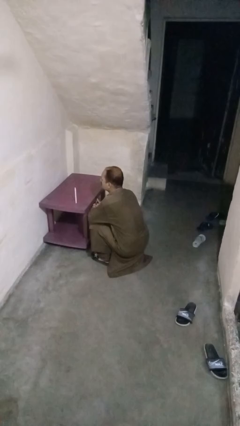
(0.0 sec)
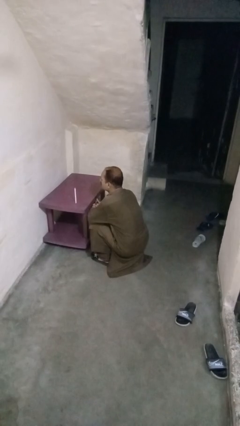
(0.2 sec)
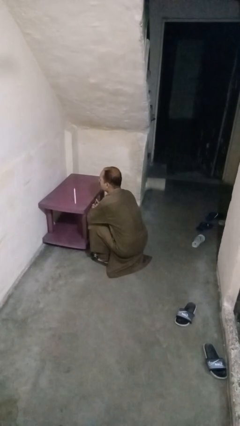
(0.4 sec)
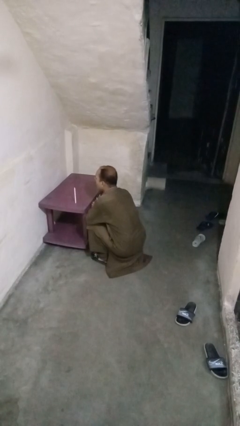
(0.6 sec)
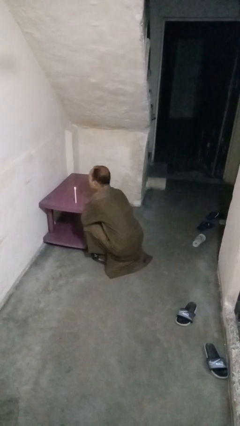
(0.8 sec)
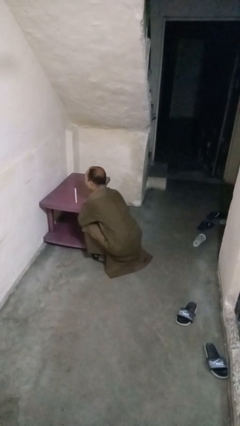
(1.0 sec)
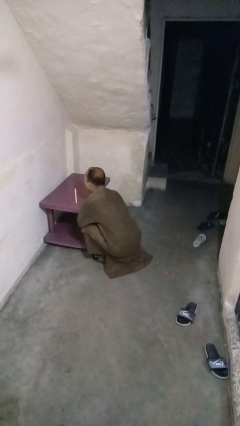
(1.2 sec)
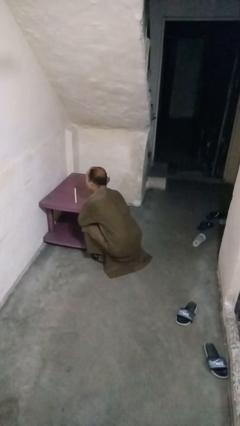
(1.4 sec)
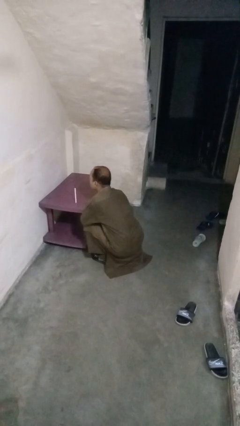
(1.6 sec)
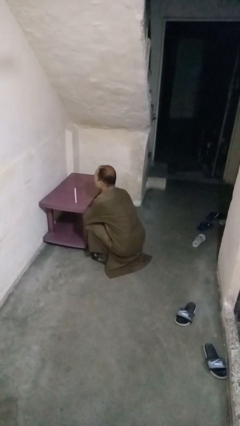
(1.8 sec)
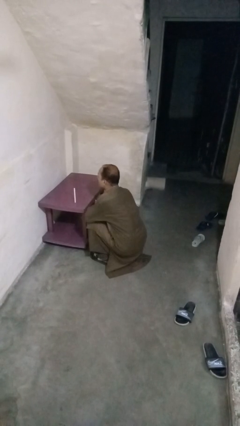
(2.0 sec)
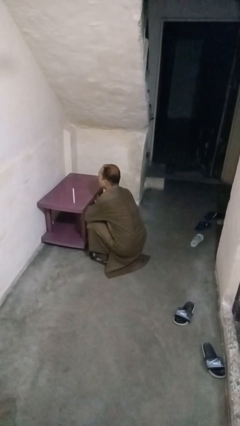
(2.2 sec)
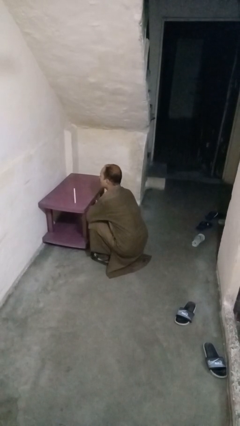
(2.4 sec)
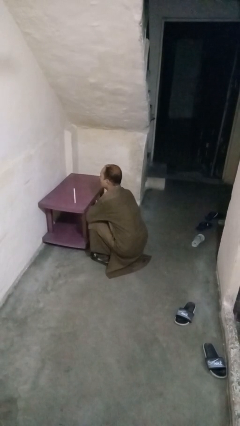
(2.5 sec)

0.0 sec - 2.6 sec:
person extinguishes candle

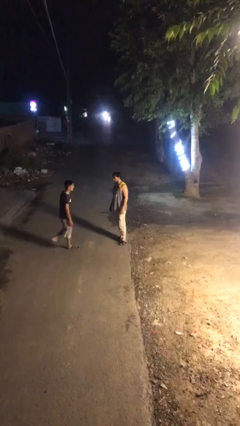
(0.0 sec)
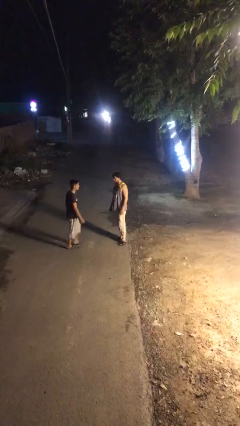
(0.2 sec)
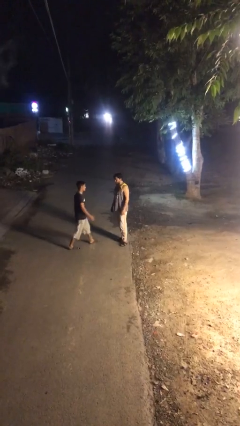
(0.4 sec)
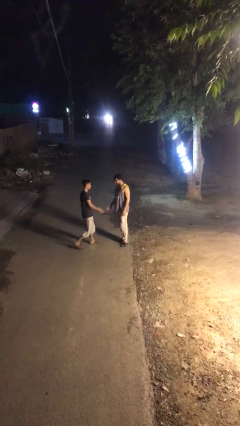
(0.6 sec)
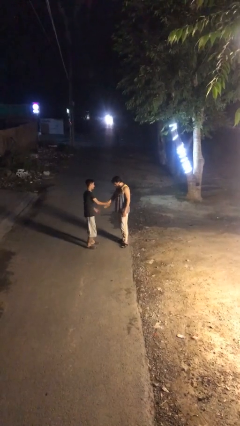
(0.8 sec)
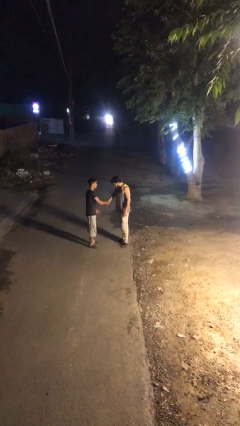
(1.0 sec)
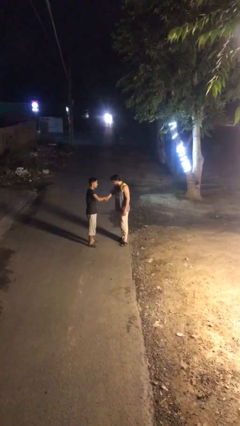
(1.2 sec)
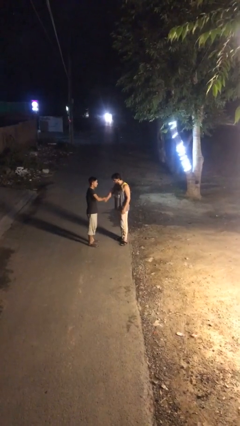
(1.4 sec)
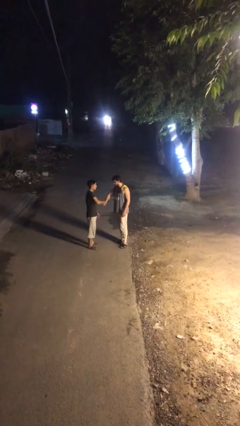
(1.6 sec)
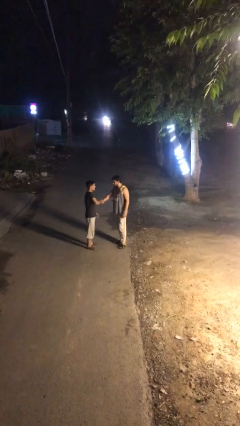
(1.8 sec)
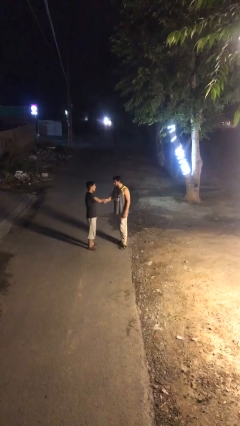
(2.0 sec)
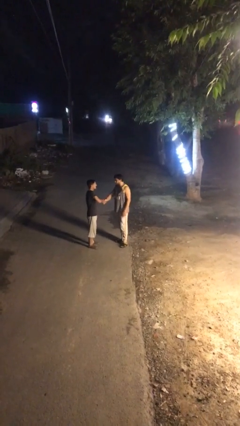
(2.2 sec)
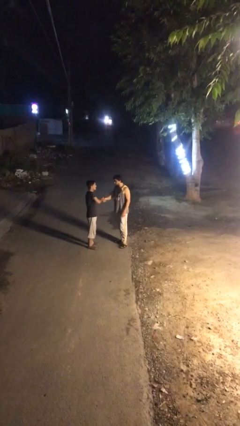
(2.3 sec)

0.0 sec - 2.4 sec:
person shakes hand

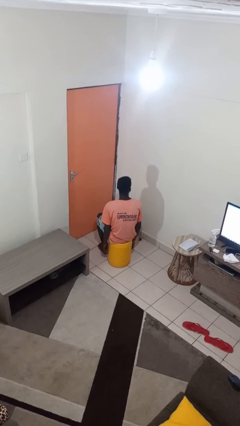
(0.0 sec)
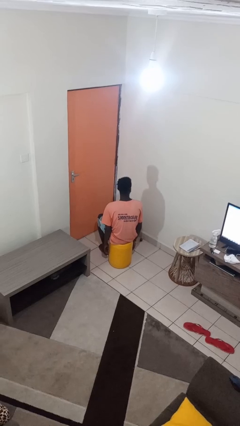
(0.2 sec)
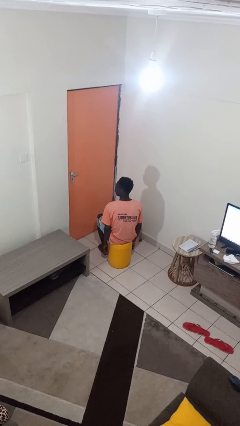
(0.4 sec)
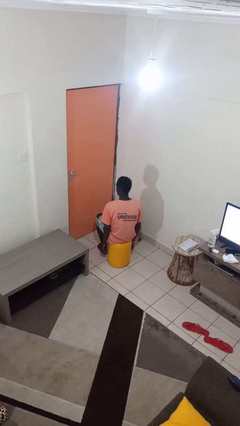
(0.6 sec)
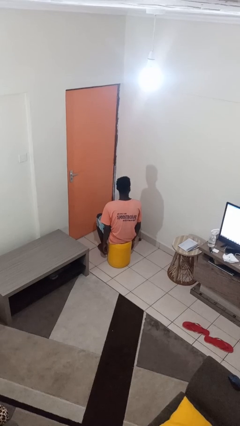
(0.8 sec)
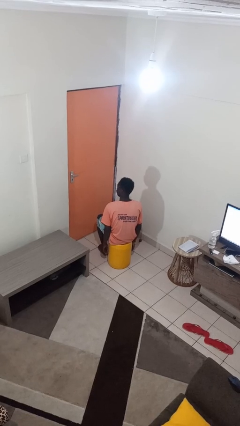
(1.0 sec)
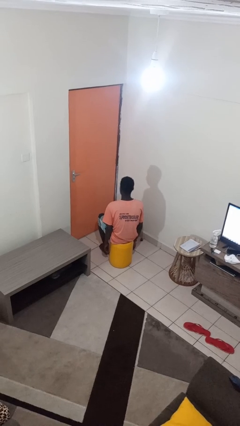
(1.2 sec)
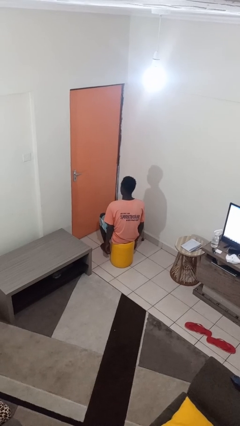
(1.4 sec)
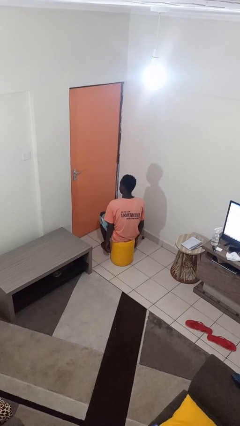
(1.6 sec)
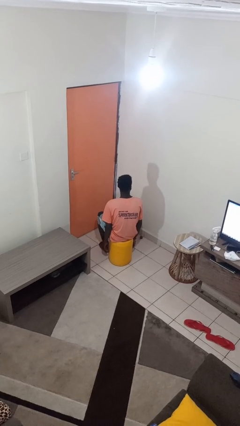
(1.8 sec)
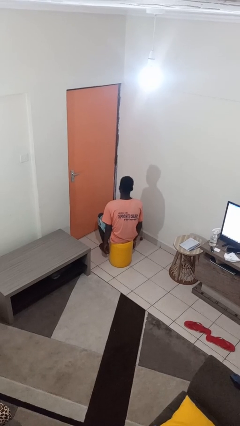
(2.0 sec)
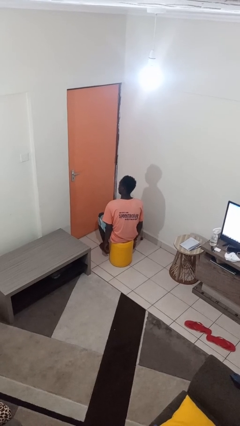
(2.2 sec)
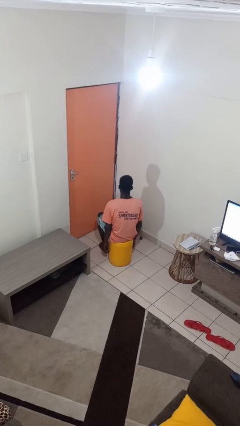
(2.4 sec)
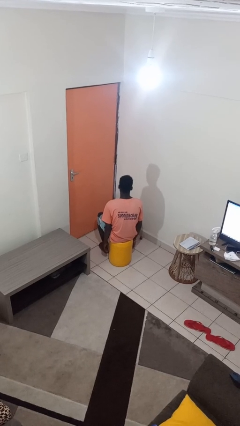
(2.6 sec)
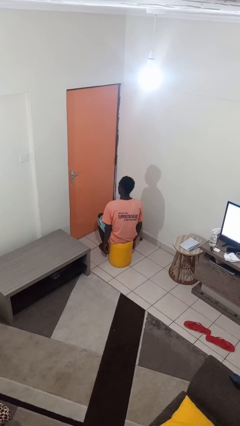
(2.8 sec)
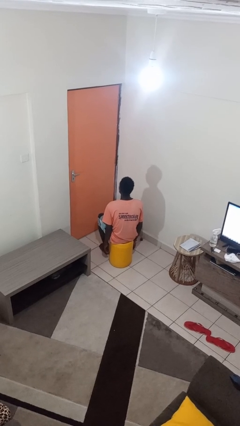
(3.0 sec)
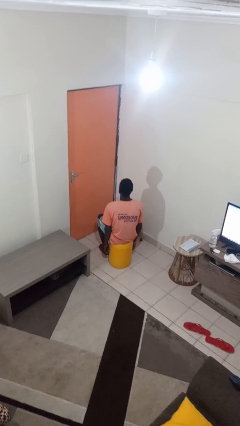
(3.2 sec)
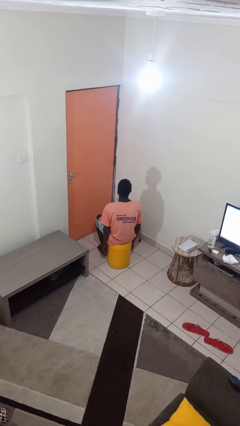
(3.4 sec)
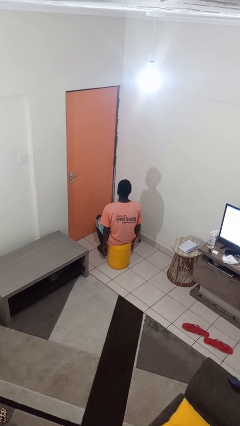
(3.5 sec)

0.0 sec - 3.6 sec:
person shakes head

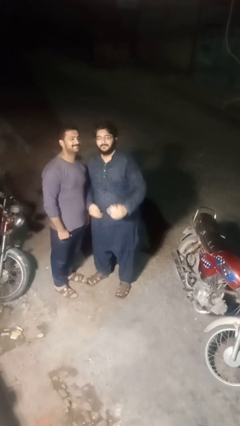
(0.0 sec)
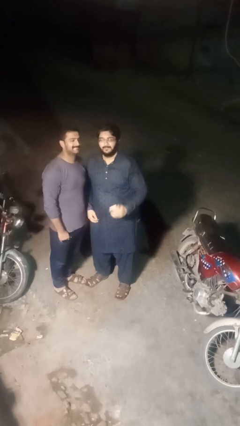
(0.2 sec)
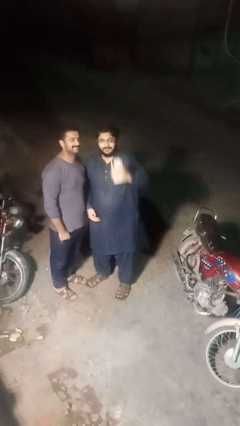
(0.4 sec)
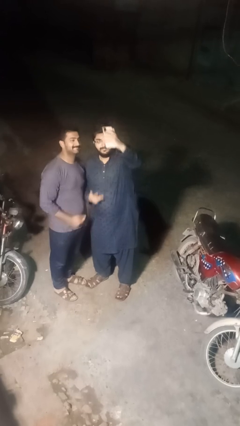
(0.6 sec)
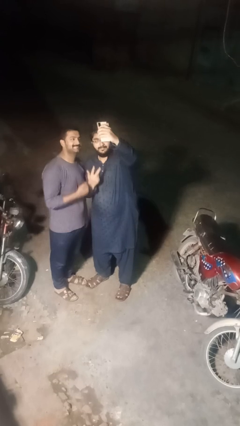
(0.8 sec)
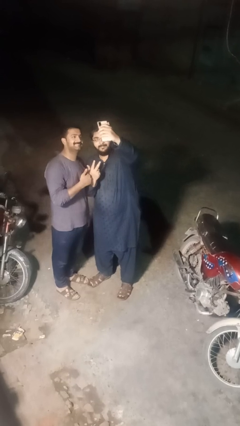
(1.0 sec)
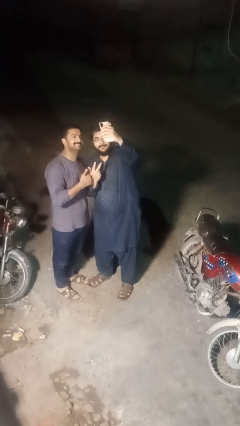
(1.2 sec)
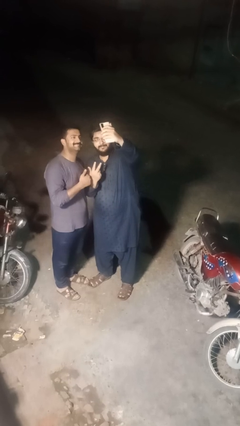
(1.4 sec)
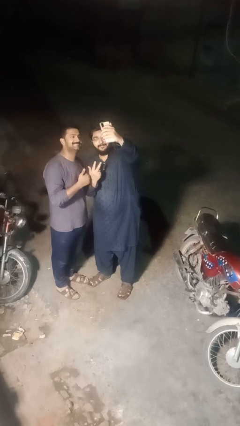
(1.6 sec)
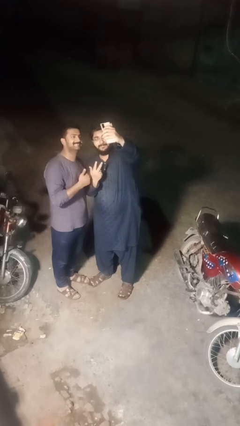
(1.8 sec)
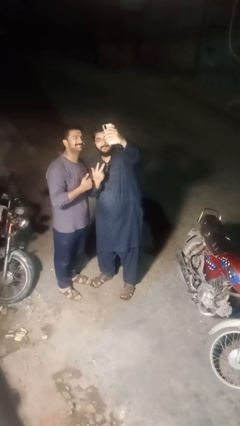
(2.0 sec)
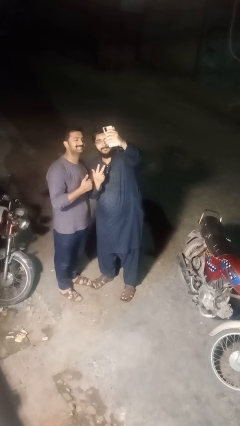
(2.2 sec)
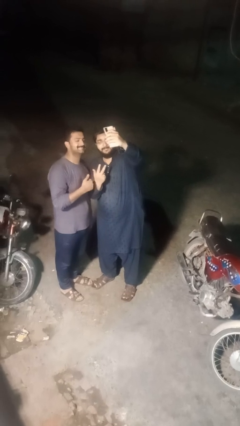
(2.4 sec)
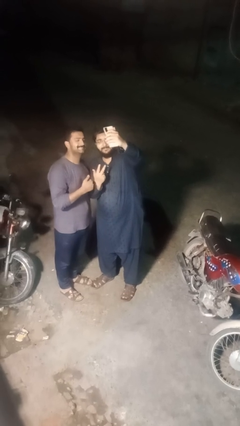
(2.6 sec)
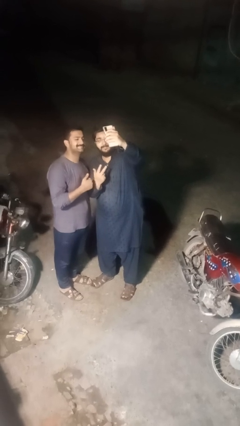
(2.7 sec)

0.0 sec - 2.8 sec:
person takes selfie with person

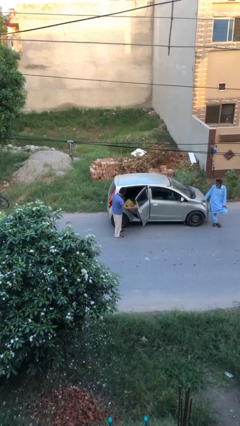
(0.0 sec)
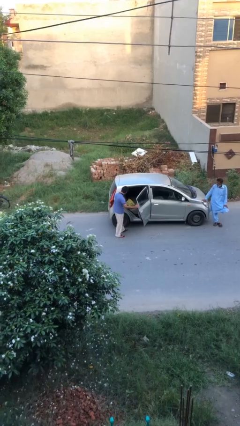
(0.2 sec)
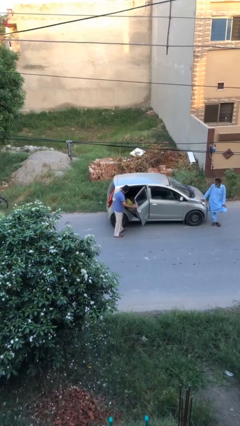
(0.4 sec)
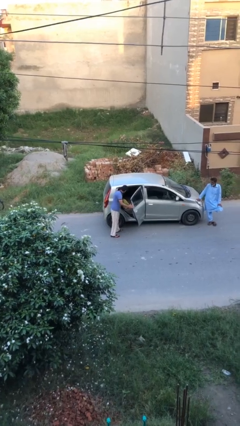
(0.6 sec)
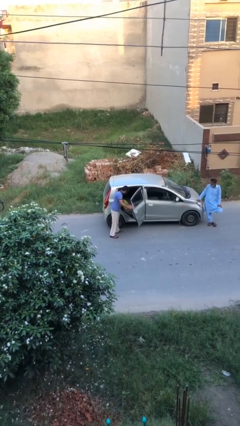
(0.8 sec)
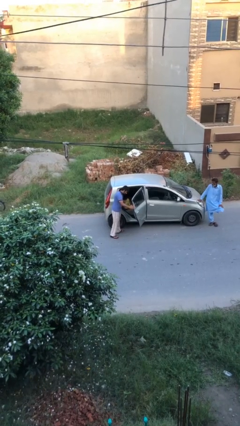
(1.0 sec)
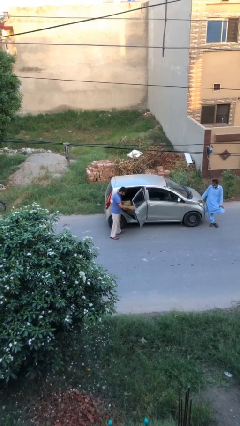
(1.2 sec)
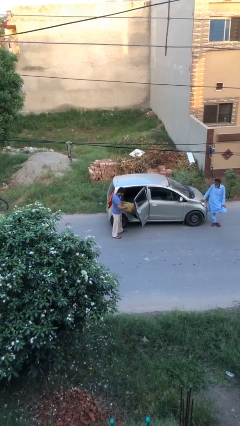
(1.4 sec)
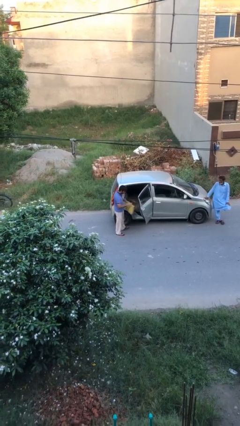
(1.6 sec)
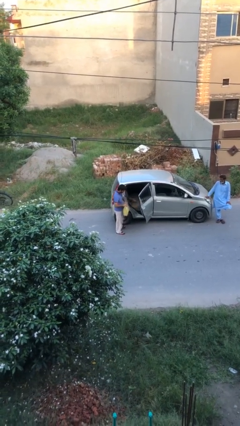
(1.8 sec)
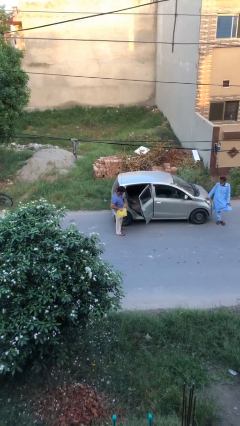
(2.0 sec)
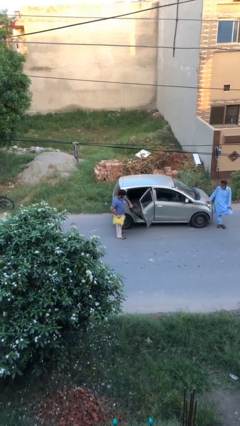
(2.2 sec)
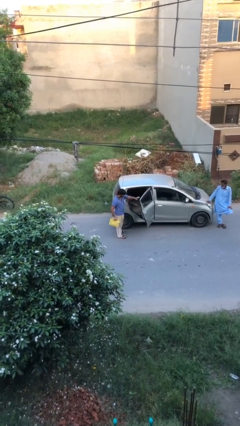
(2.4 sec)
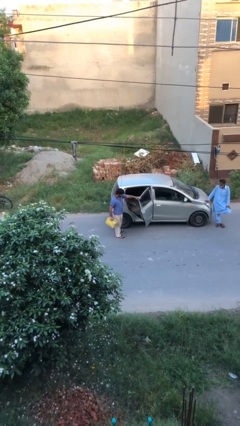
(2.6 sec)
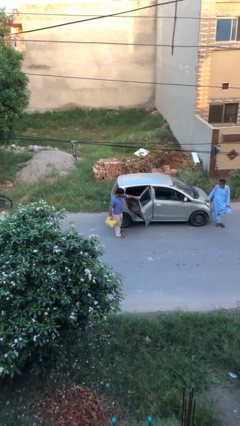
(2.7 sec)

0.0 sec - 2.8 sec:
person unloads car

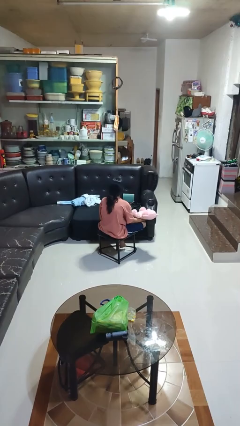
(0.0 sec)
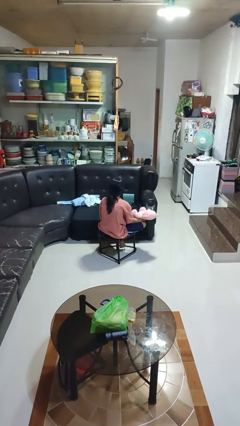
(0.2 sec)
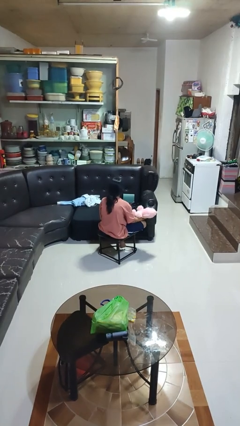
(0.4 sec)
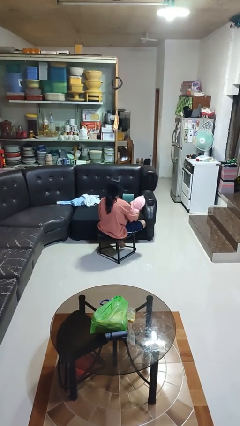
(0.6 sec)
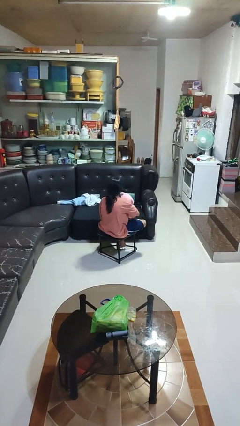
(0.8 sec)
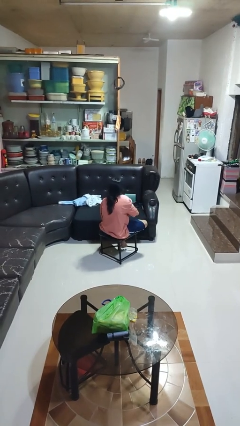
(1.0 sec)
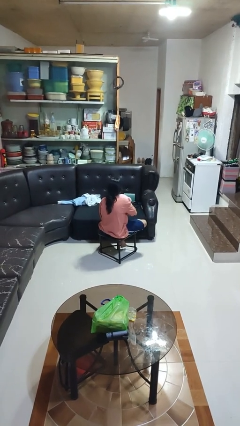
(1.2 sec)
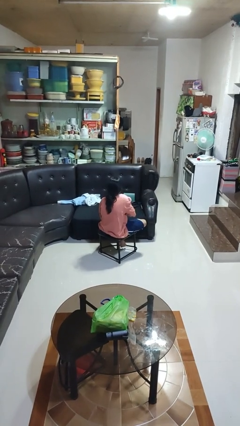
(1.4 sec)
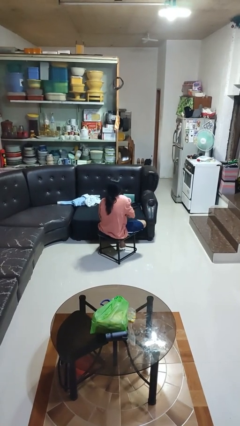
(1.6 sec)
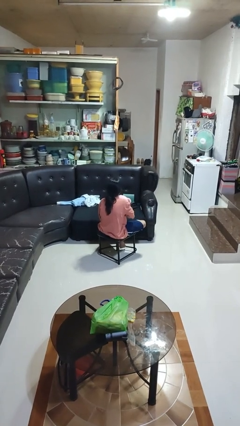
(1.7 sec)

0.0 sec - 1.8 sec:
person hugs stuffed animal

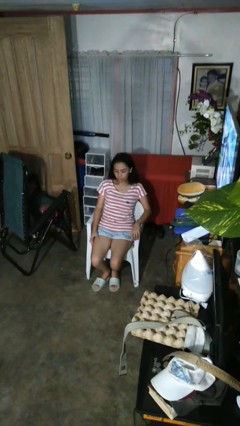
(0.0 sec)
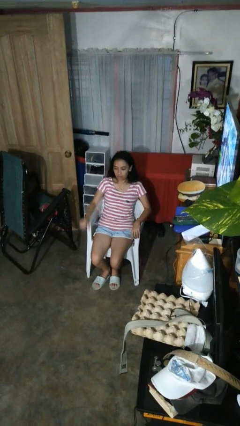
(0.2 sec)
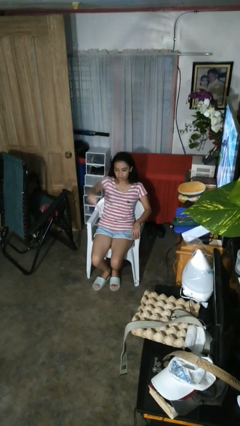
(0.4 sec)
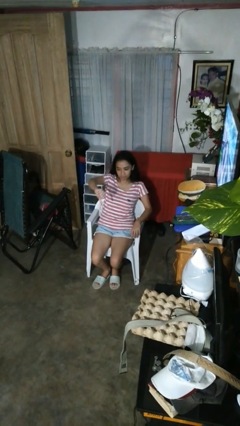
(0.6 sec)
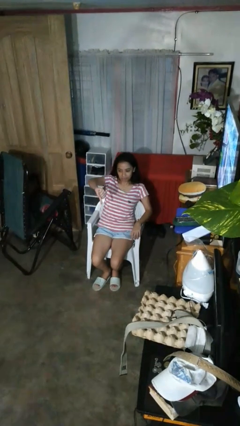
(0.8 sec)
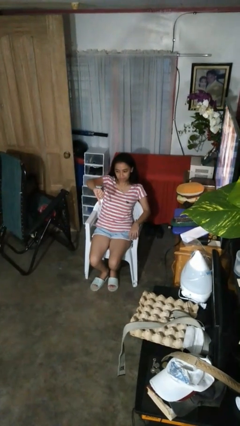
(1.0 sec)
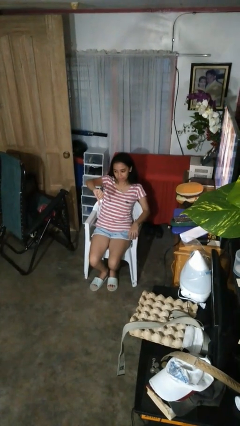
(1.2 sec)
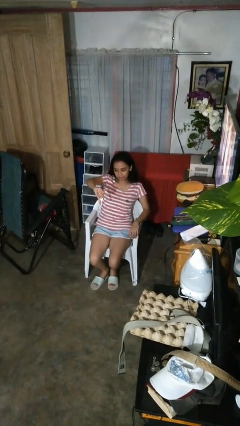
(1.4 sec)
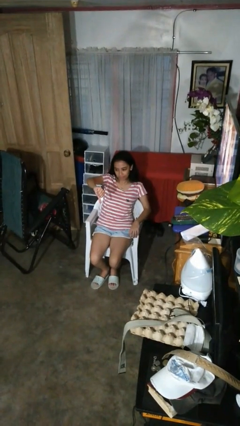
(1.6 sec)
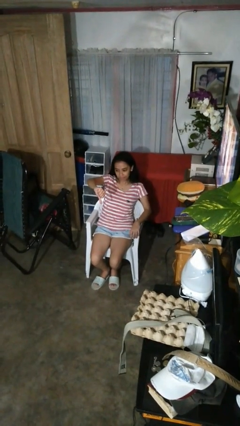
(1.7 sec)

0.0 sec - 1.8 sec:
person gestures thumbs down
